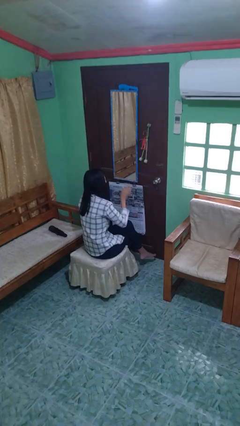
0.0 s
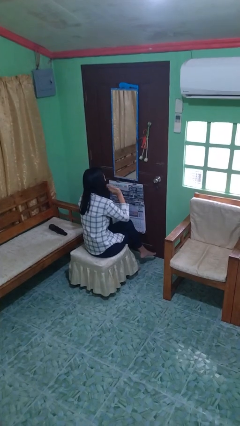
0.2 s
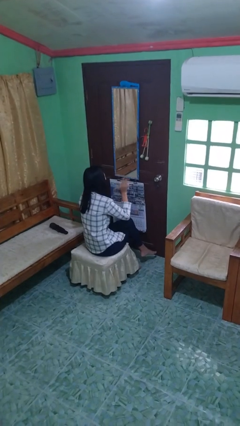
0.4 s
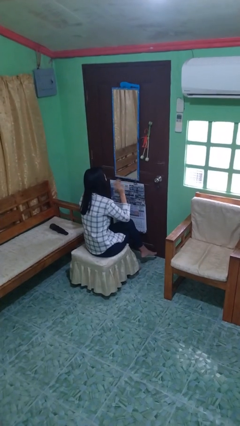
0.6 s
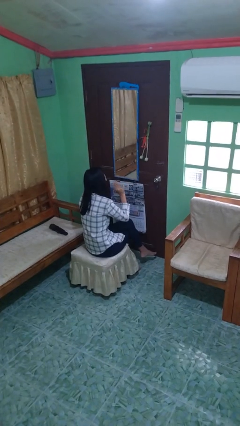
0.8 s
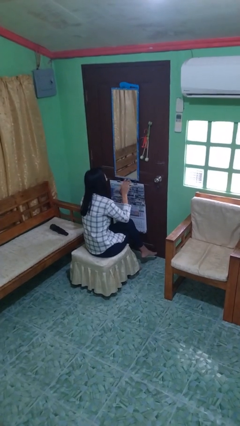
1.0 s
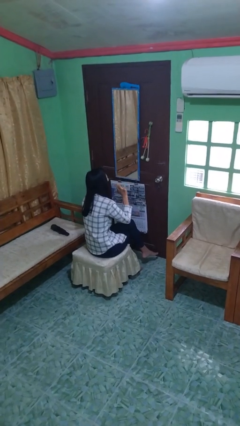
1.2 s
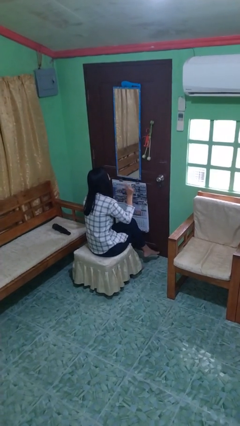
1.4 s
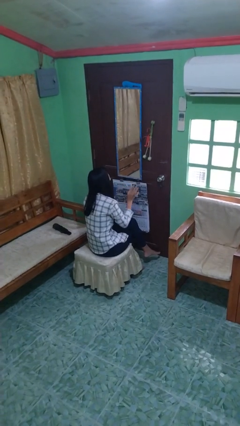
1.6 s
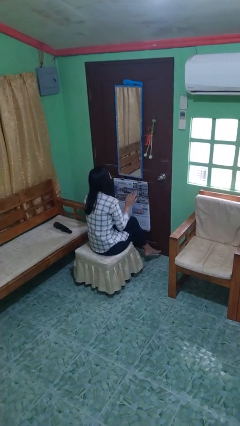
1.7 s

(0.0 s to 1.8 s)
person waves hand over object

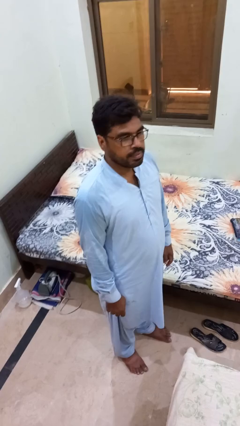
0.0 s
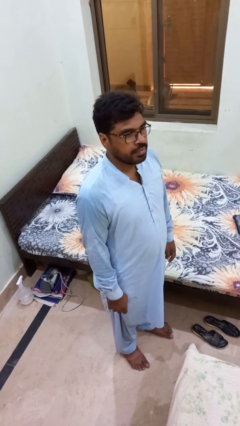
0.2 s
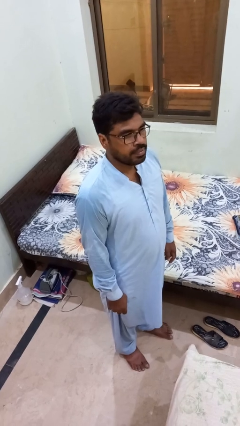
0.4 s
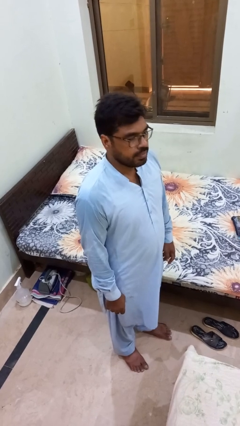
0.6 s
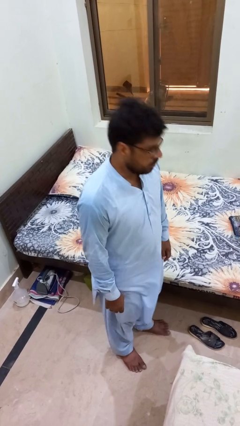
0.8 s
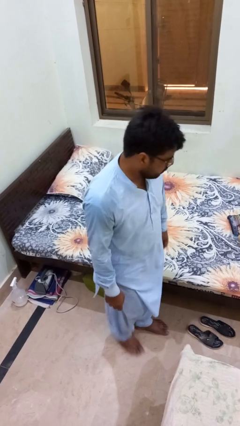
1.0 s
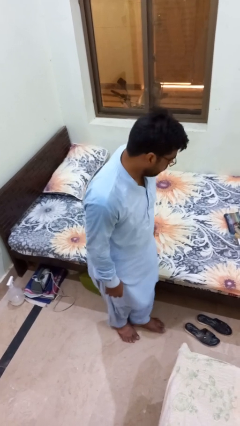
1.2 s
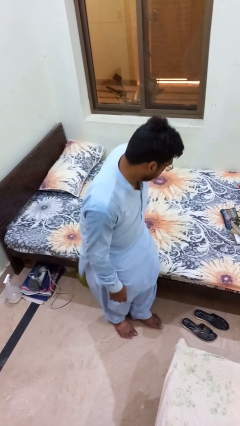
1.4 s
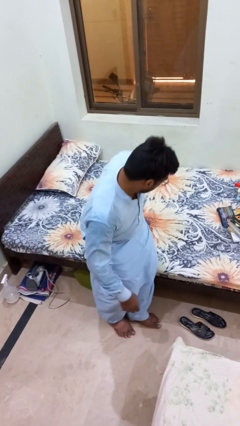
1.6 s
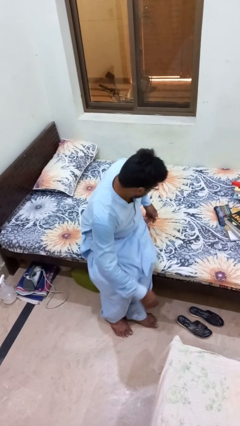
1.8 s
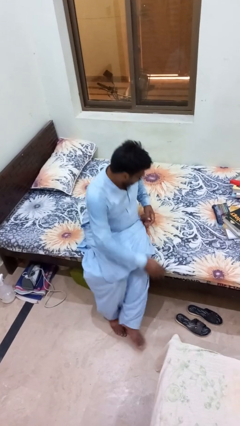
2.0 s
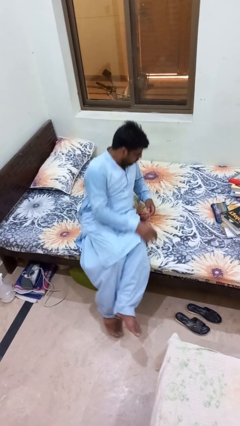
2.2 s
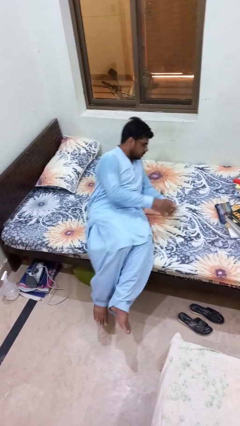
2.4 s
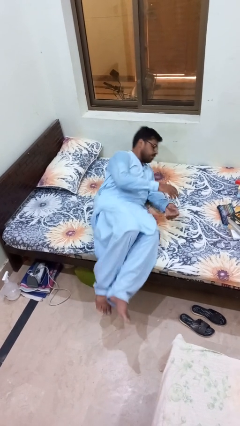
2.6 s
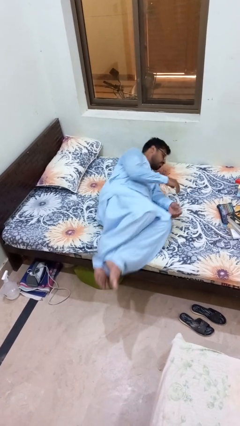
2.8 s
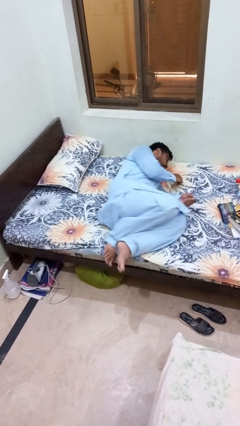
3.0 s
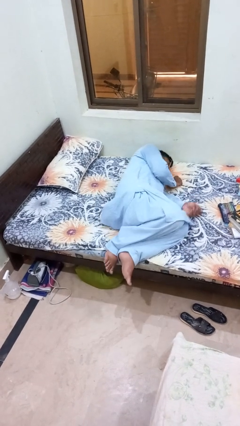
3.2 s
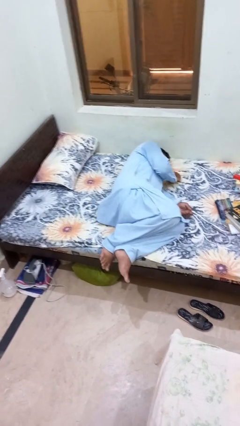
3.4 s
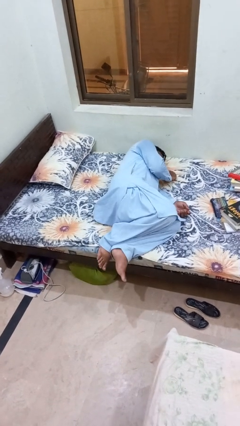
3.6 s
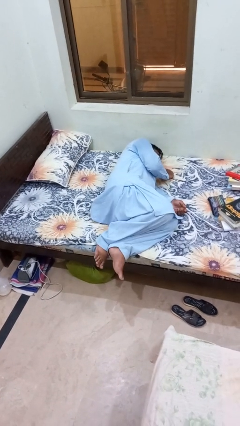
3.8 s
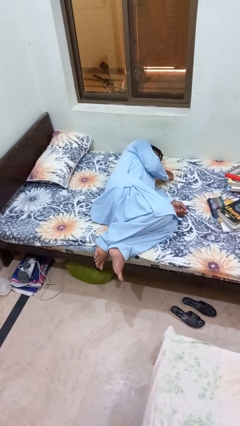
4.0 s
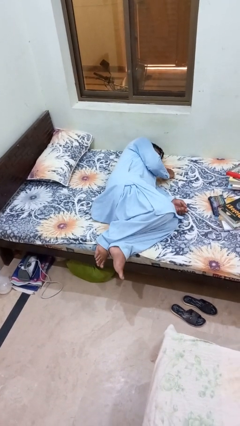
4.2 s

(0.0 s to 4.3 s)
person lies down on bed

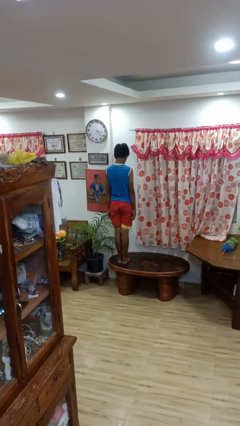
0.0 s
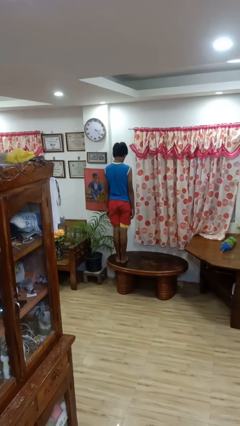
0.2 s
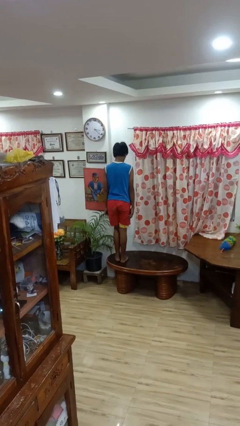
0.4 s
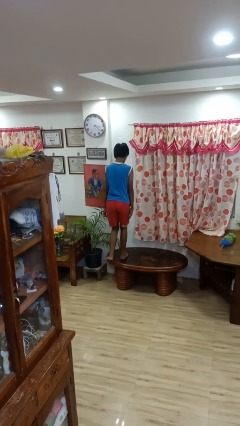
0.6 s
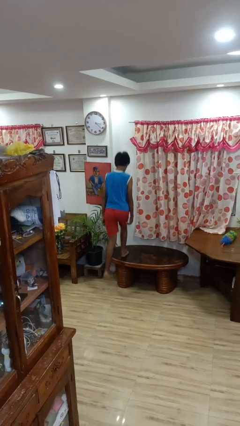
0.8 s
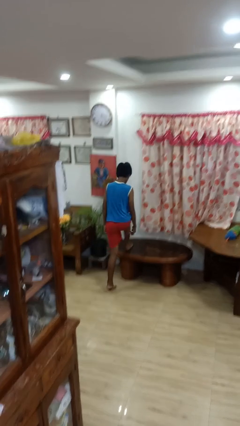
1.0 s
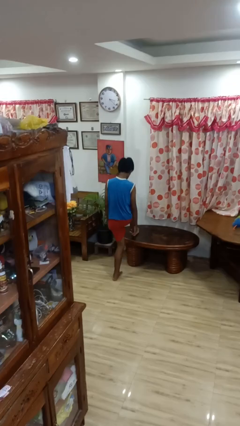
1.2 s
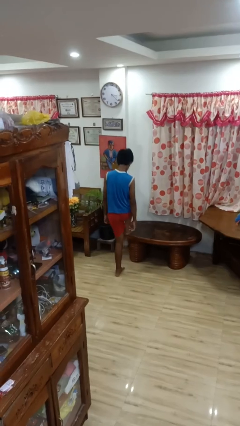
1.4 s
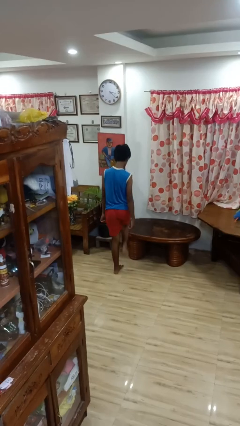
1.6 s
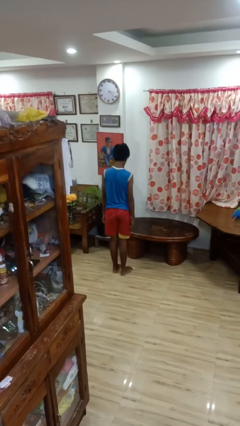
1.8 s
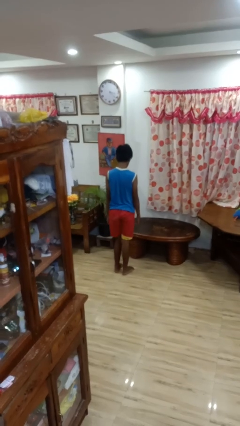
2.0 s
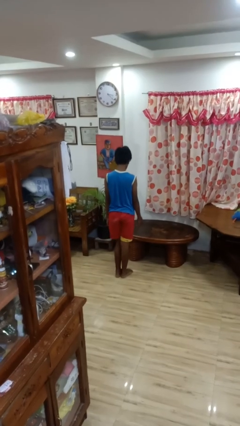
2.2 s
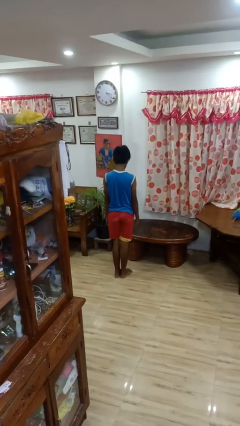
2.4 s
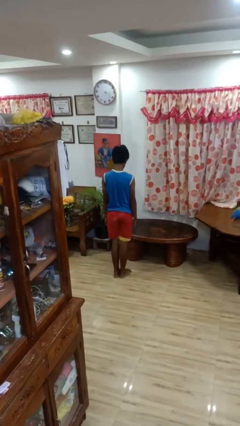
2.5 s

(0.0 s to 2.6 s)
person climbs off table

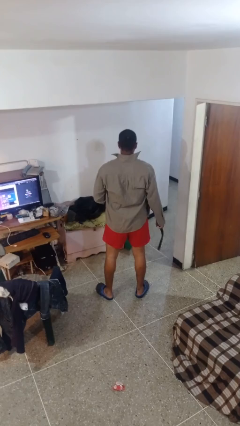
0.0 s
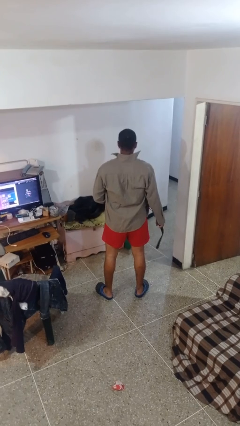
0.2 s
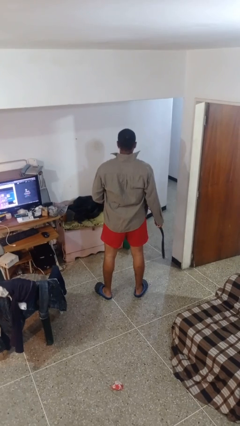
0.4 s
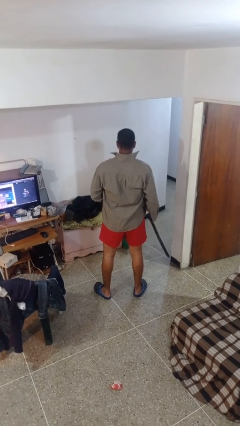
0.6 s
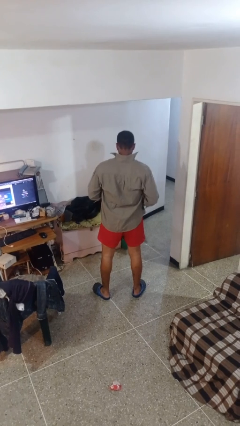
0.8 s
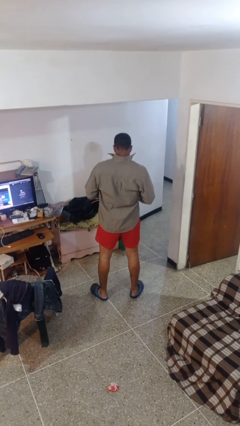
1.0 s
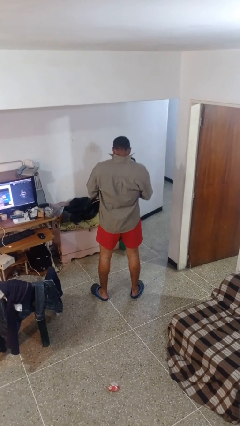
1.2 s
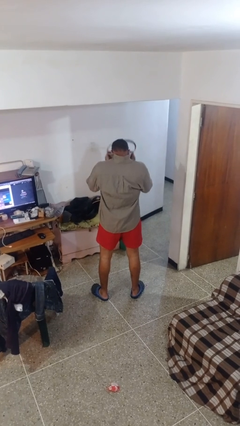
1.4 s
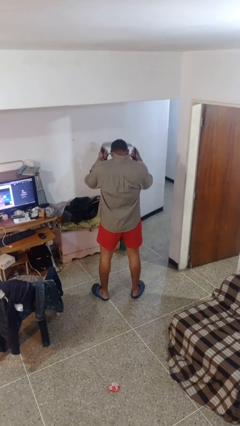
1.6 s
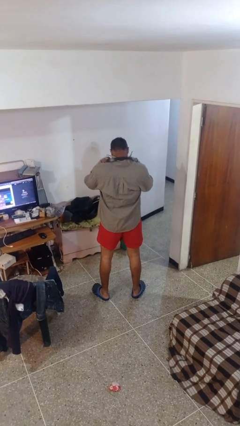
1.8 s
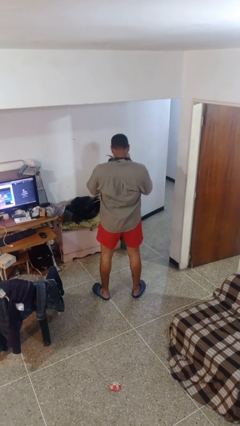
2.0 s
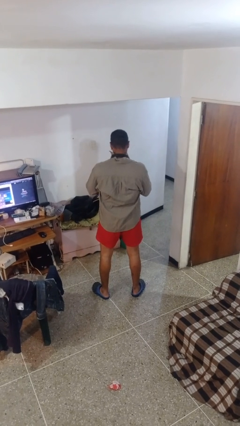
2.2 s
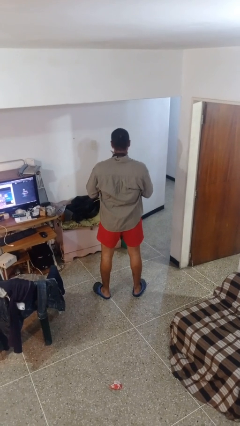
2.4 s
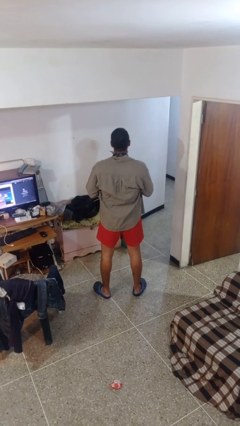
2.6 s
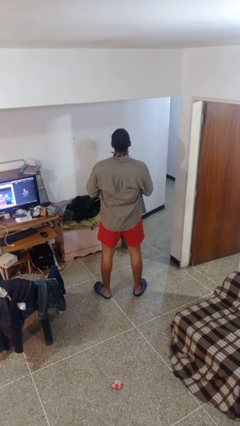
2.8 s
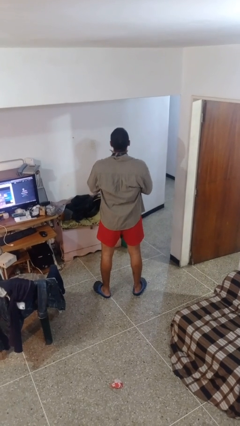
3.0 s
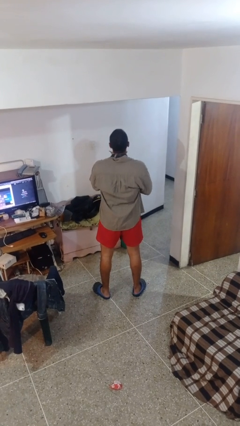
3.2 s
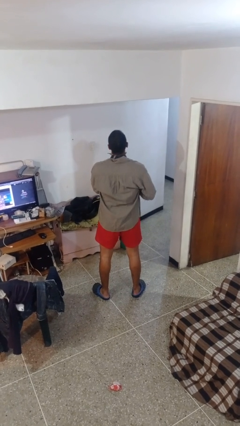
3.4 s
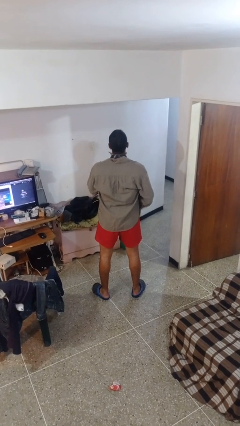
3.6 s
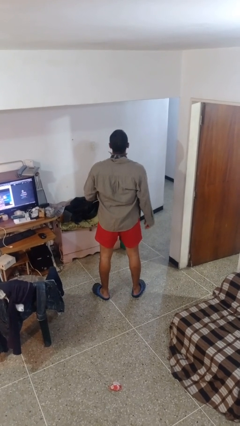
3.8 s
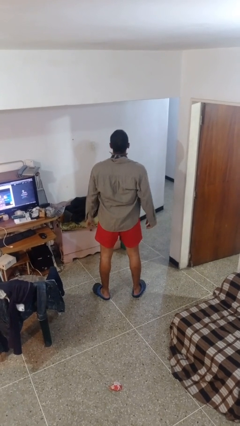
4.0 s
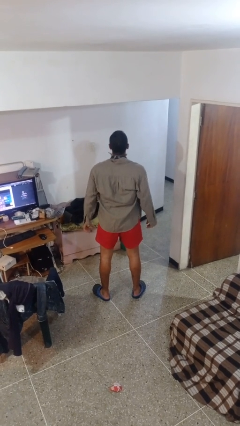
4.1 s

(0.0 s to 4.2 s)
person puts on necktie

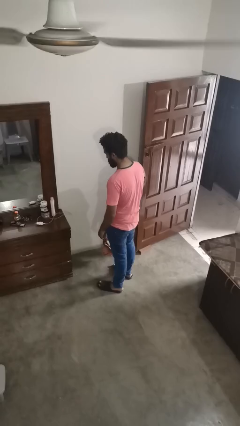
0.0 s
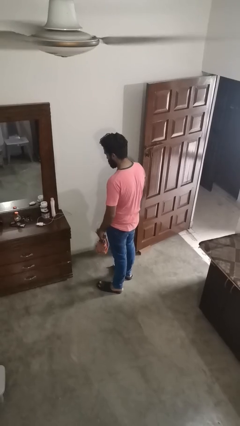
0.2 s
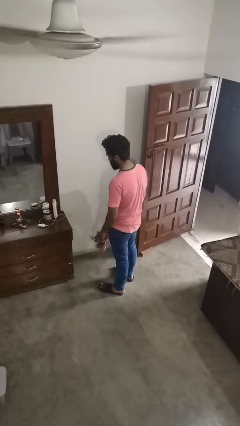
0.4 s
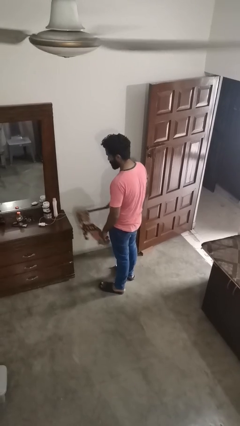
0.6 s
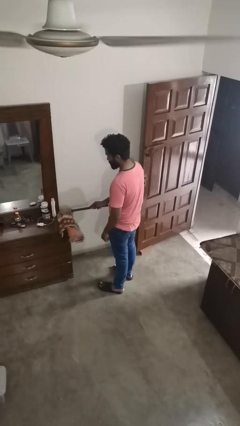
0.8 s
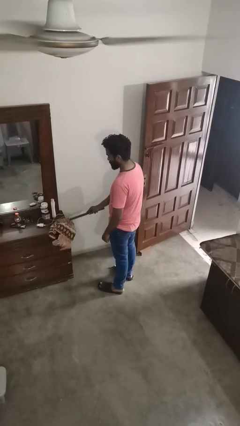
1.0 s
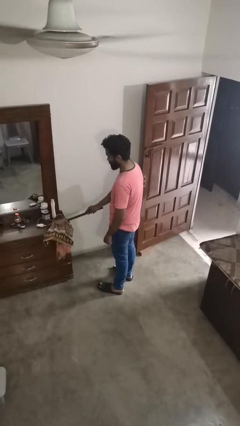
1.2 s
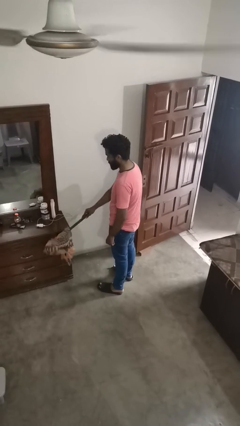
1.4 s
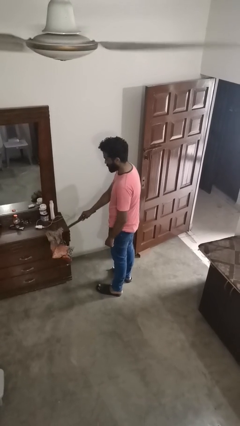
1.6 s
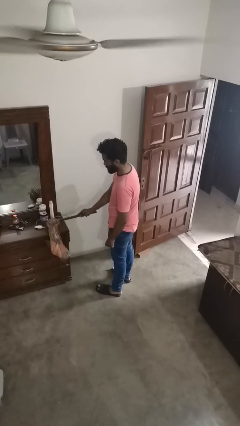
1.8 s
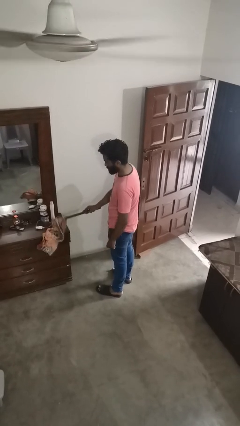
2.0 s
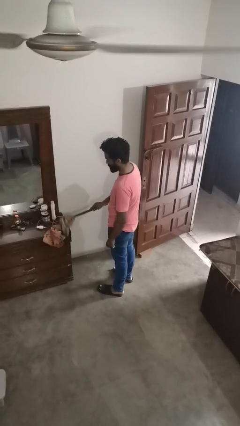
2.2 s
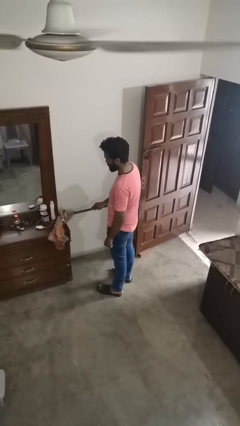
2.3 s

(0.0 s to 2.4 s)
person dusts furniture

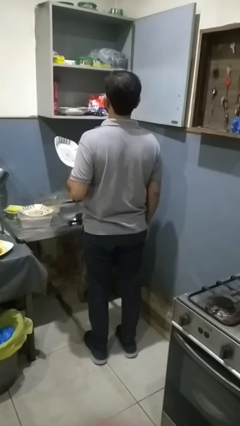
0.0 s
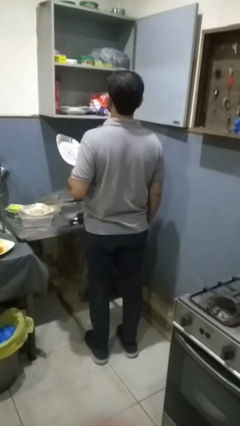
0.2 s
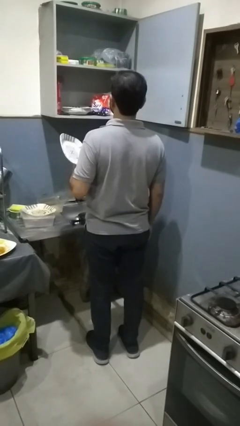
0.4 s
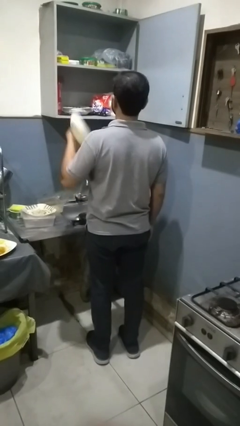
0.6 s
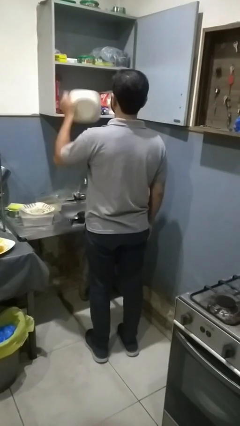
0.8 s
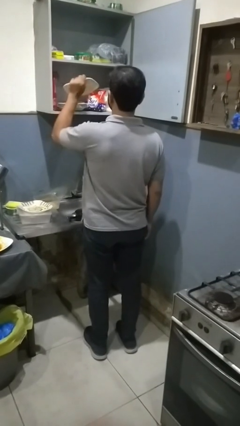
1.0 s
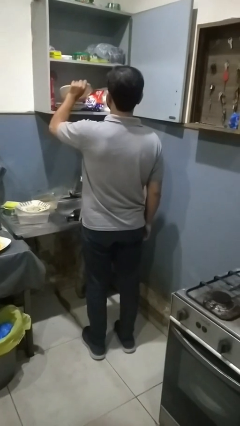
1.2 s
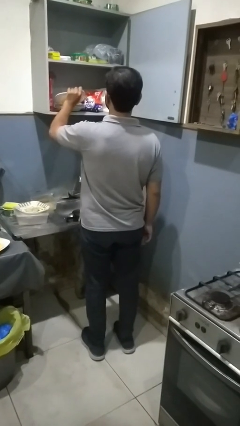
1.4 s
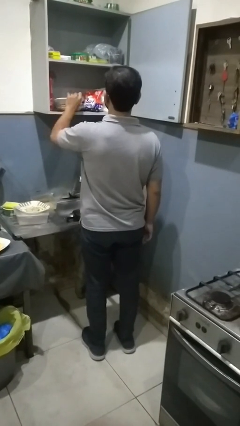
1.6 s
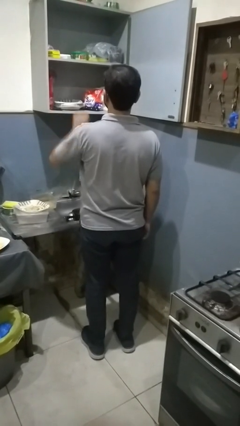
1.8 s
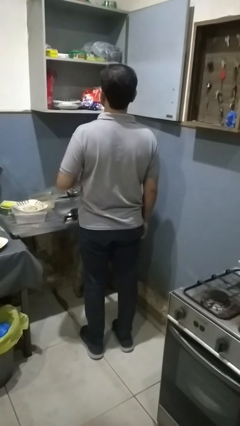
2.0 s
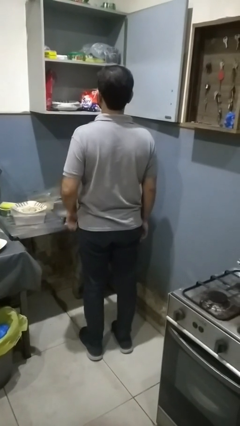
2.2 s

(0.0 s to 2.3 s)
person puts object in cabinet
